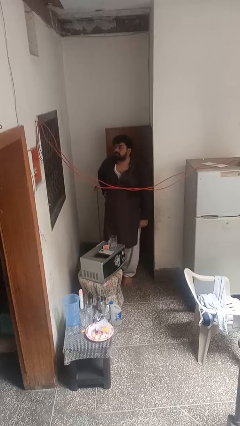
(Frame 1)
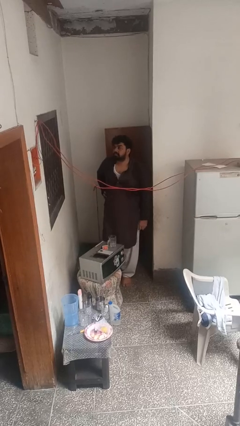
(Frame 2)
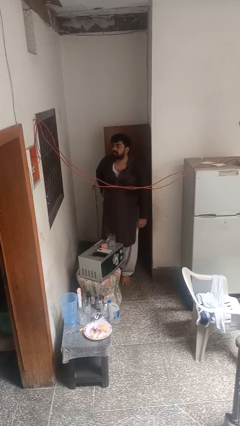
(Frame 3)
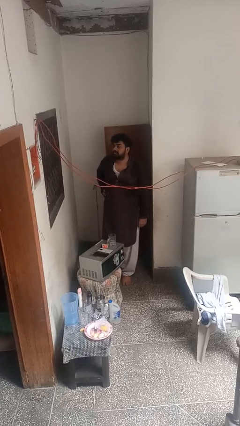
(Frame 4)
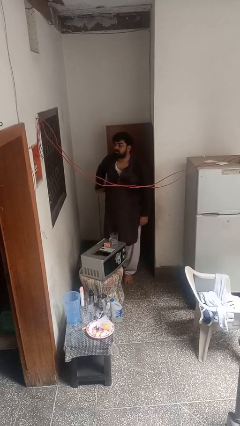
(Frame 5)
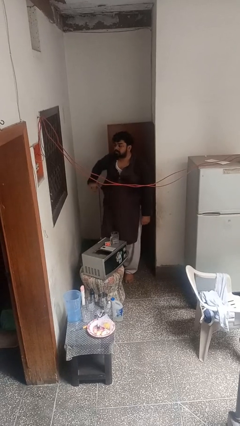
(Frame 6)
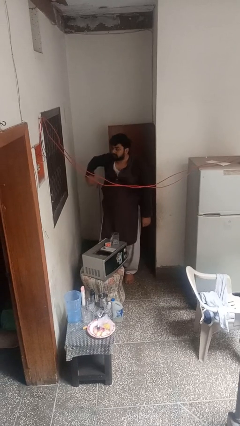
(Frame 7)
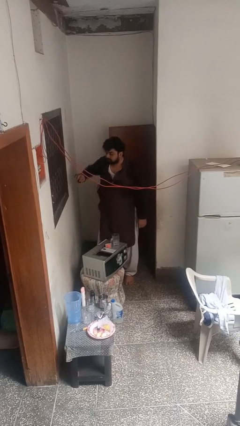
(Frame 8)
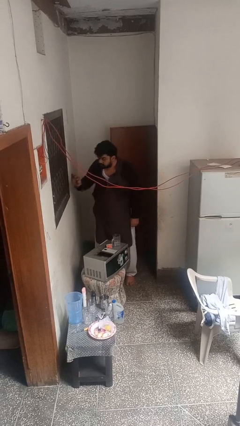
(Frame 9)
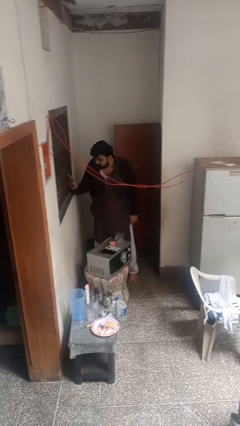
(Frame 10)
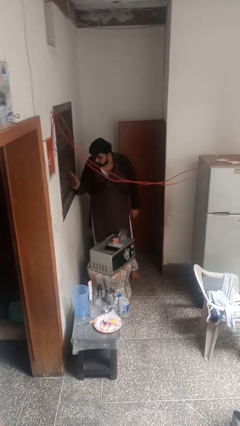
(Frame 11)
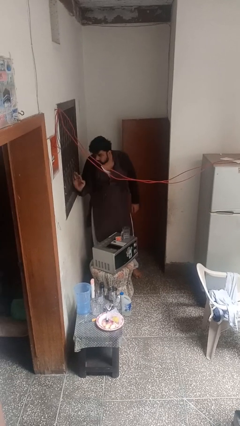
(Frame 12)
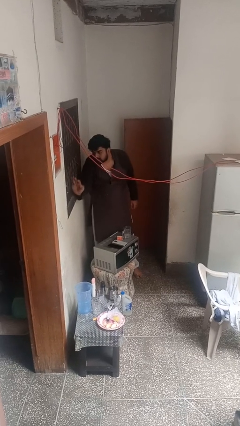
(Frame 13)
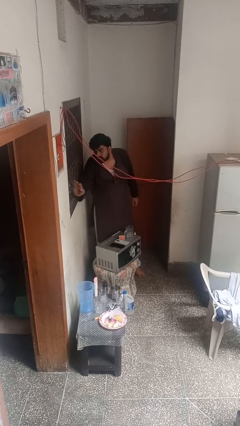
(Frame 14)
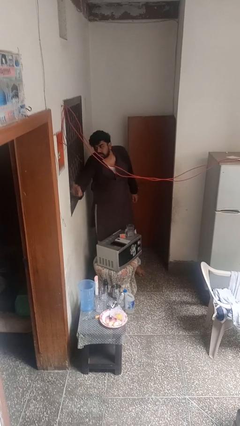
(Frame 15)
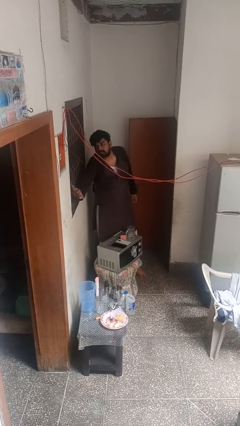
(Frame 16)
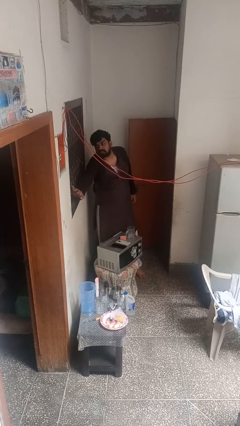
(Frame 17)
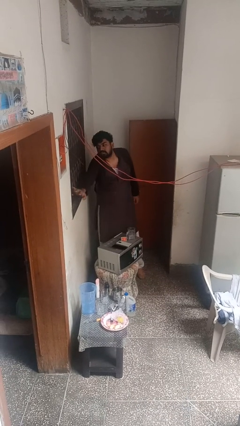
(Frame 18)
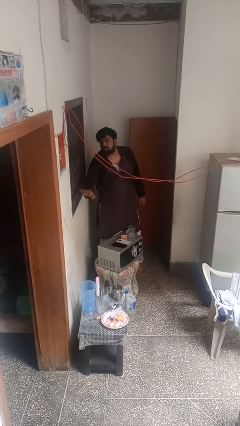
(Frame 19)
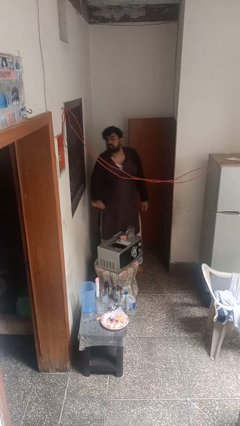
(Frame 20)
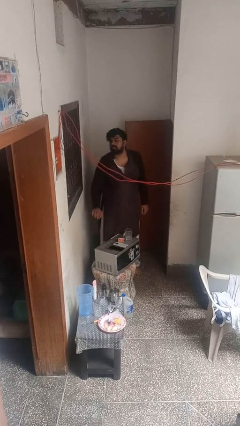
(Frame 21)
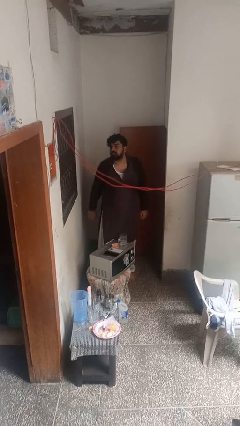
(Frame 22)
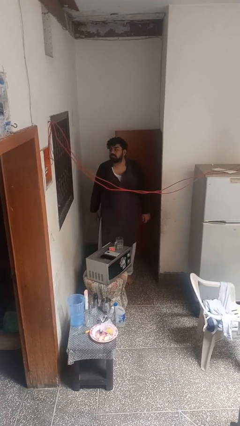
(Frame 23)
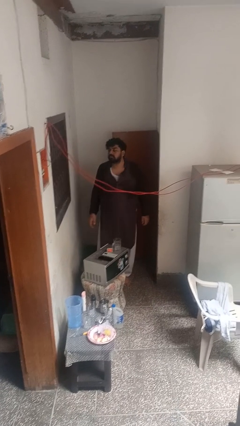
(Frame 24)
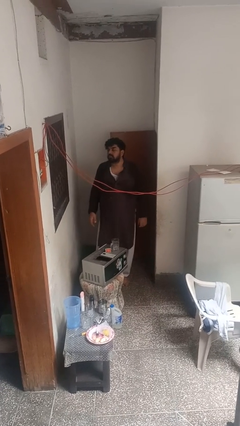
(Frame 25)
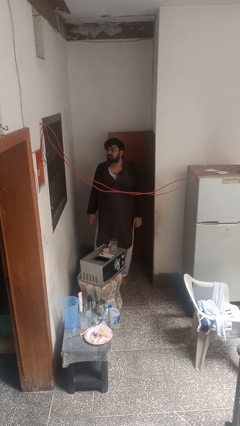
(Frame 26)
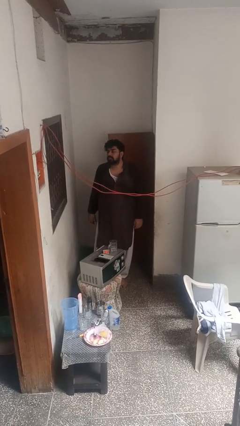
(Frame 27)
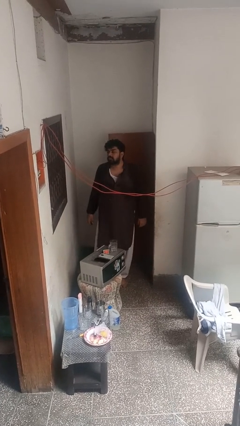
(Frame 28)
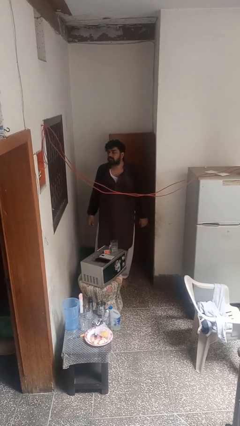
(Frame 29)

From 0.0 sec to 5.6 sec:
person opens home window

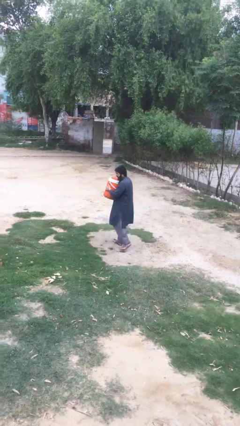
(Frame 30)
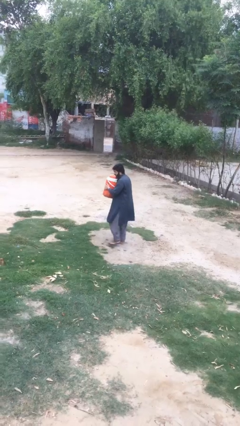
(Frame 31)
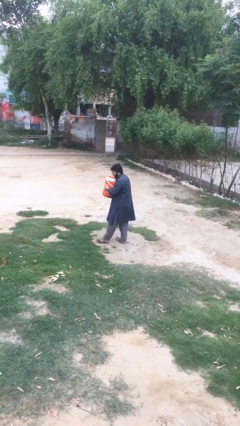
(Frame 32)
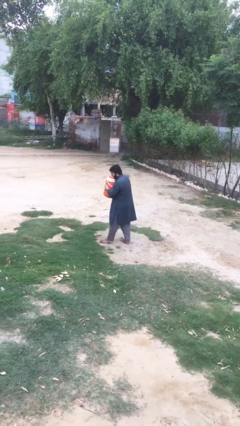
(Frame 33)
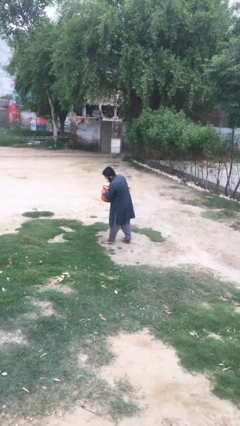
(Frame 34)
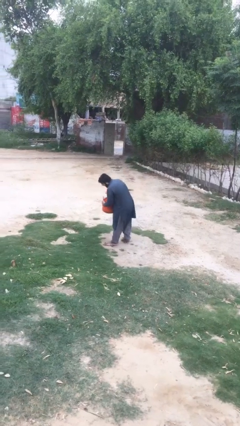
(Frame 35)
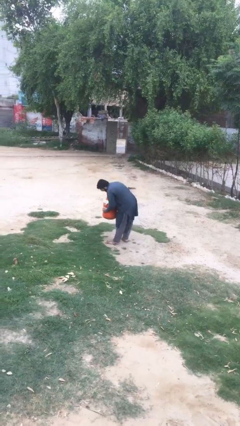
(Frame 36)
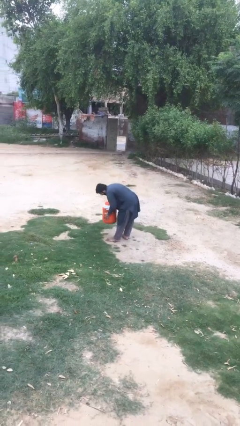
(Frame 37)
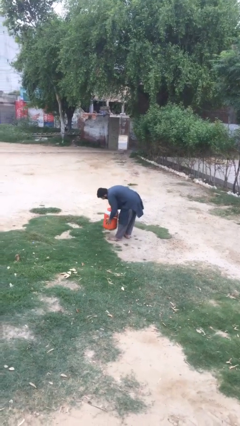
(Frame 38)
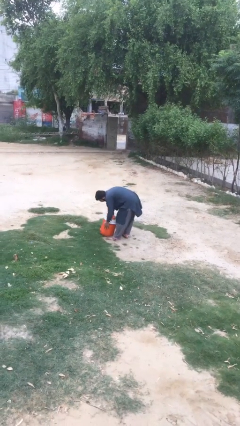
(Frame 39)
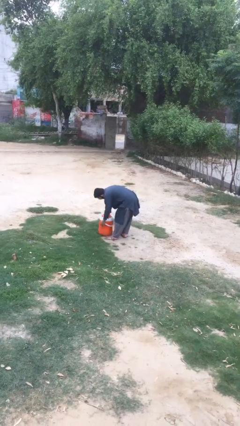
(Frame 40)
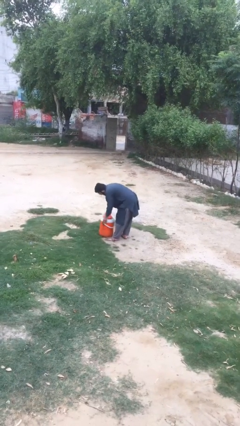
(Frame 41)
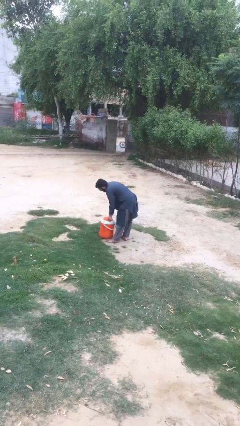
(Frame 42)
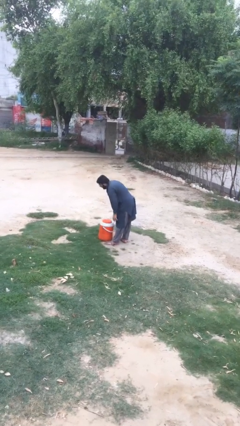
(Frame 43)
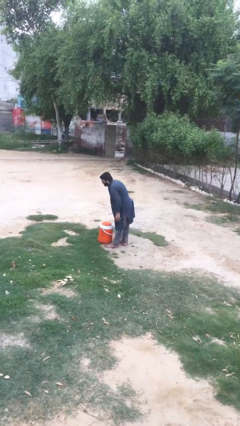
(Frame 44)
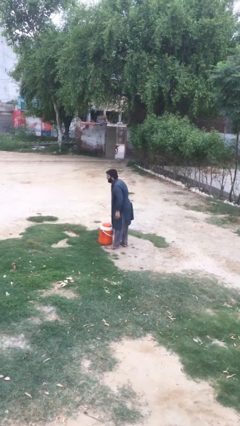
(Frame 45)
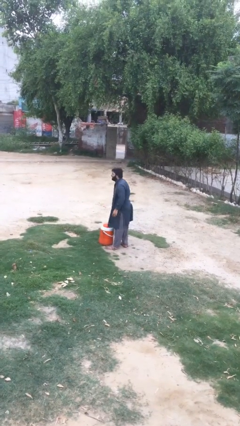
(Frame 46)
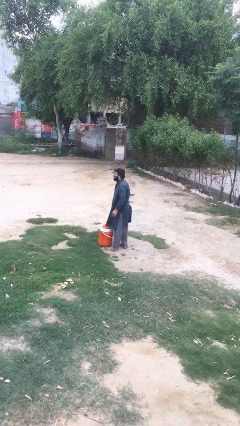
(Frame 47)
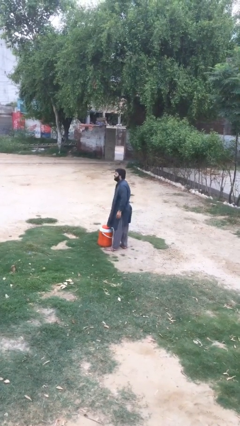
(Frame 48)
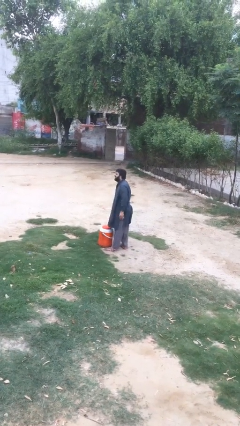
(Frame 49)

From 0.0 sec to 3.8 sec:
person puts down object on floor

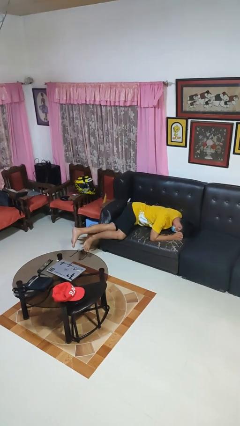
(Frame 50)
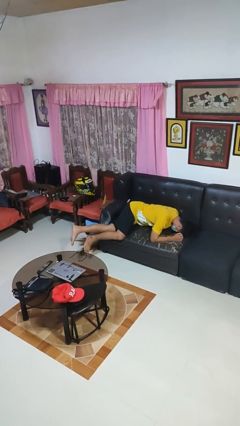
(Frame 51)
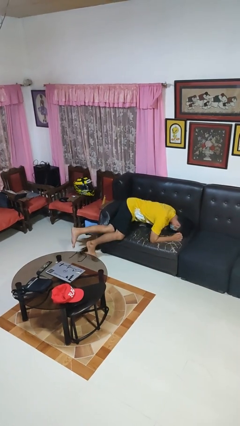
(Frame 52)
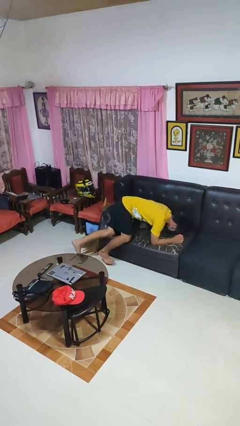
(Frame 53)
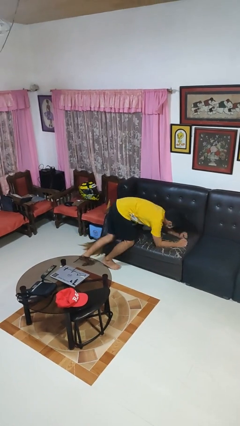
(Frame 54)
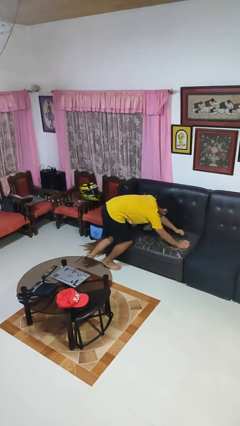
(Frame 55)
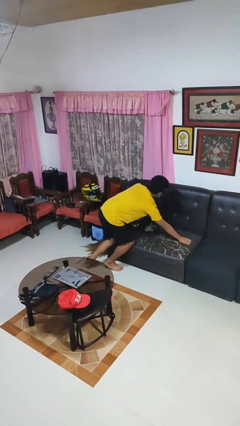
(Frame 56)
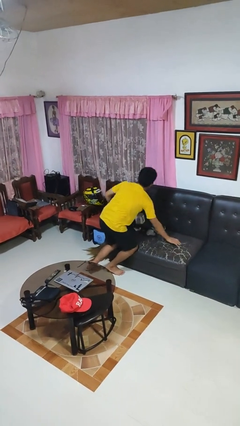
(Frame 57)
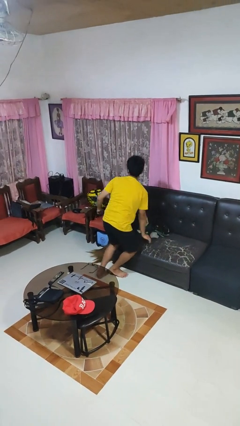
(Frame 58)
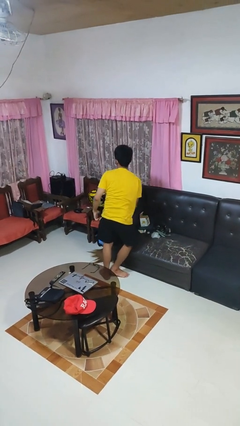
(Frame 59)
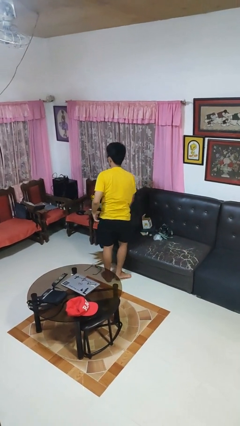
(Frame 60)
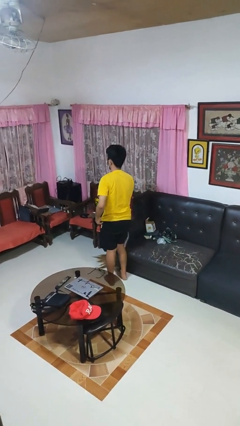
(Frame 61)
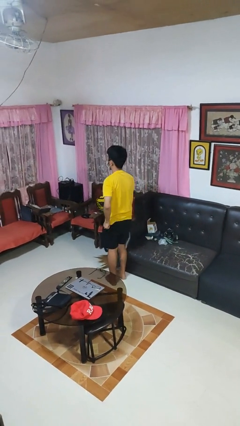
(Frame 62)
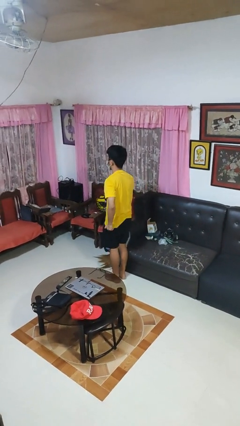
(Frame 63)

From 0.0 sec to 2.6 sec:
person stands up

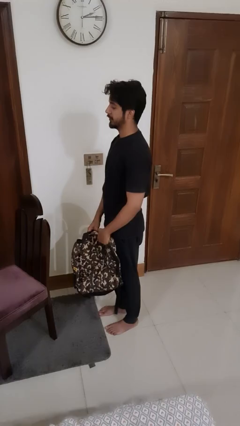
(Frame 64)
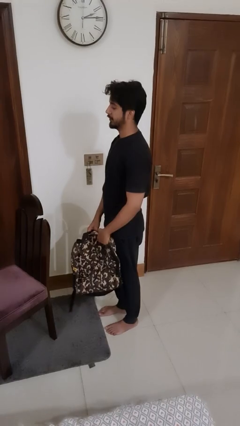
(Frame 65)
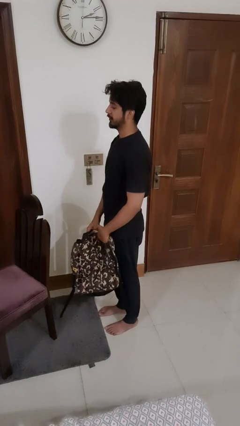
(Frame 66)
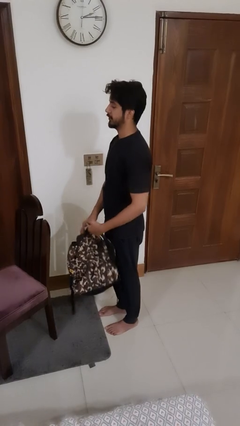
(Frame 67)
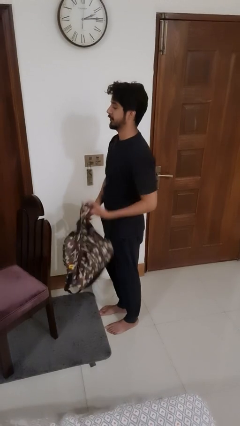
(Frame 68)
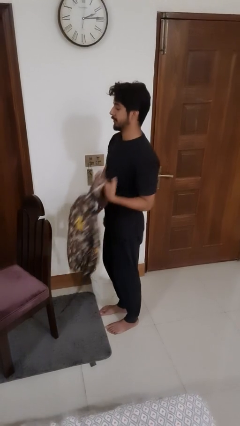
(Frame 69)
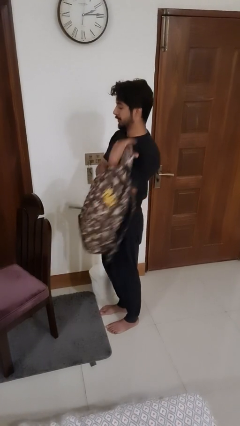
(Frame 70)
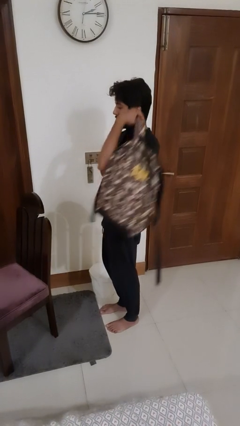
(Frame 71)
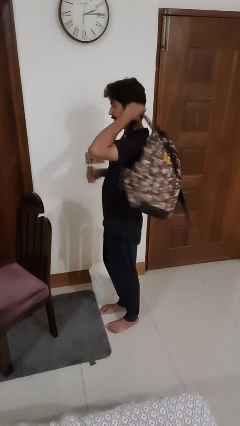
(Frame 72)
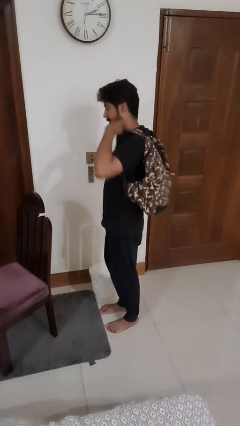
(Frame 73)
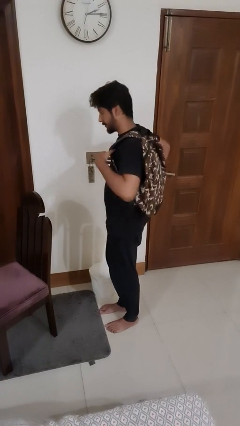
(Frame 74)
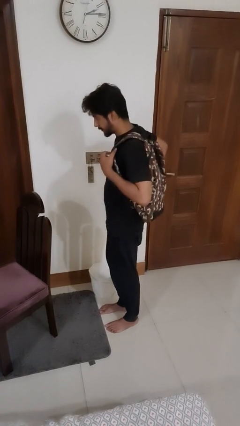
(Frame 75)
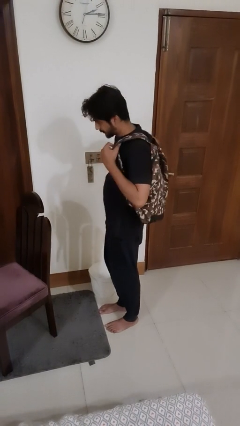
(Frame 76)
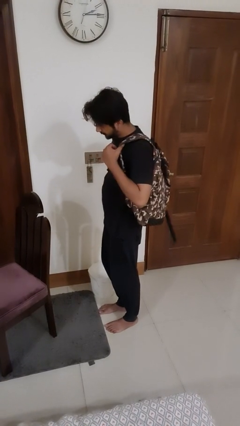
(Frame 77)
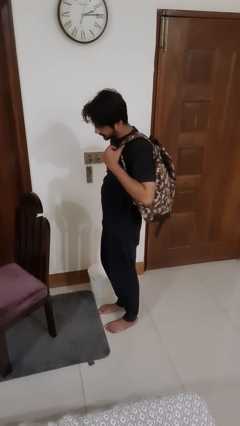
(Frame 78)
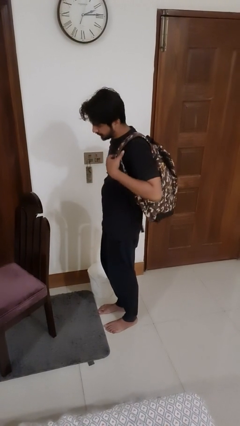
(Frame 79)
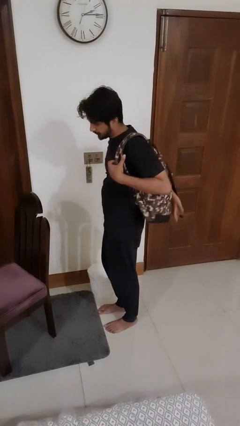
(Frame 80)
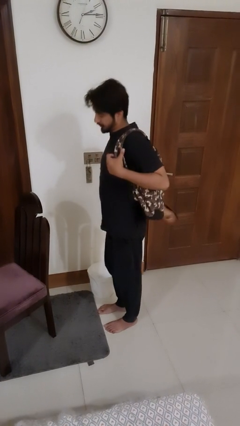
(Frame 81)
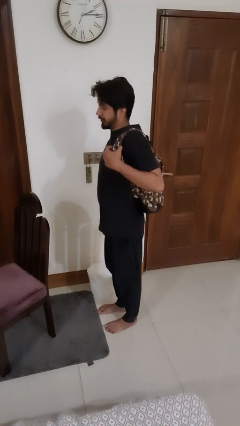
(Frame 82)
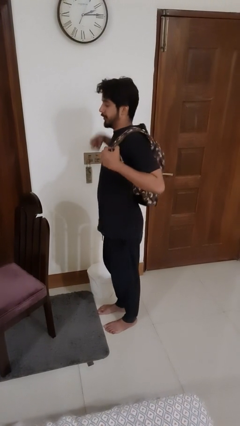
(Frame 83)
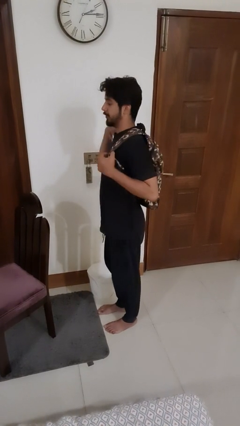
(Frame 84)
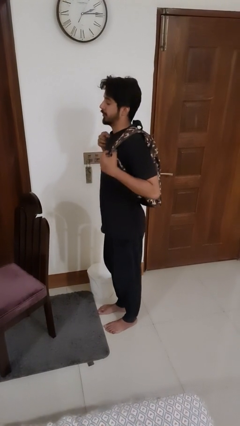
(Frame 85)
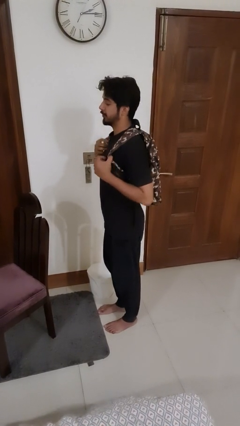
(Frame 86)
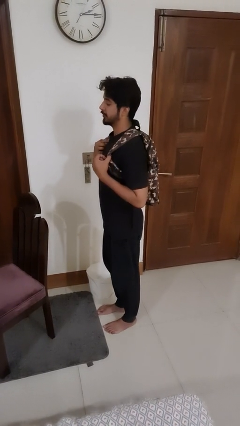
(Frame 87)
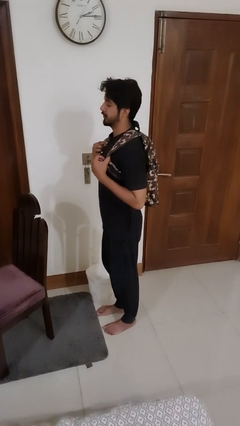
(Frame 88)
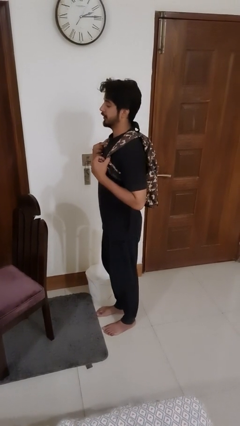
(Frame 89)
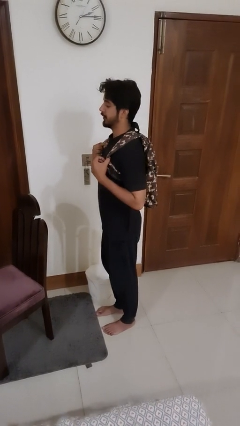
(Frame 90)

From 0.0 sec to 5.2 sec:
person puts on backpack

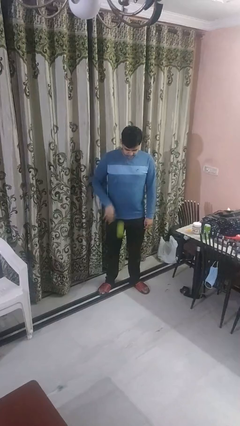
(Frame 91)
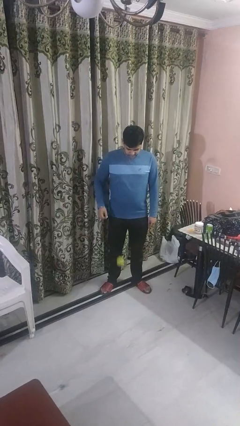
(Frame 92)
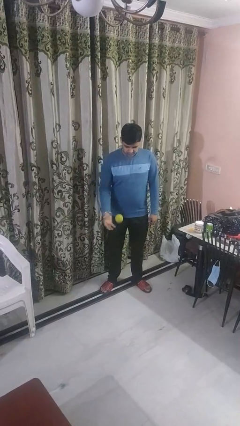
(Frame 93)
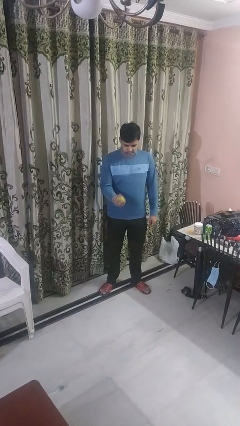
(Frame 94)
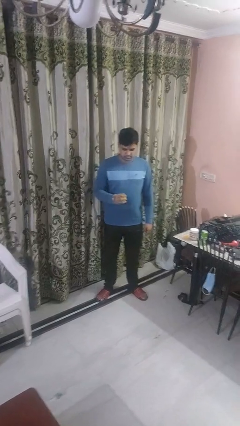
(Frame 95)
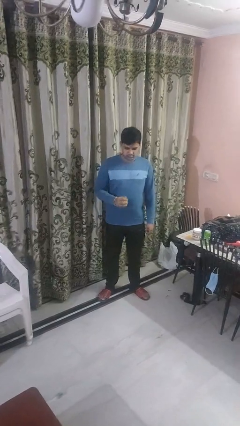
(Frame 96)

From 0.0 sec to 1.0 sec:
person bounces ball on floor
